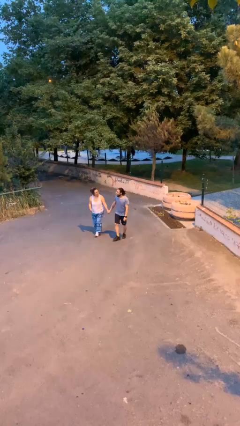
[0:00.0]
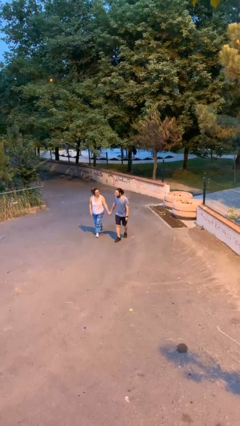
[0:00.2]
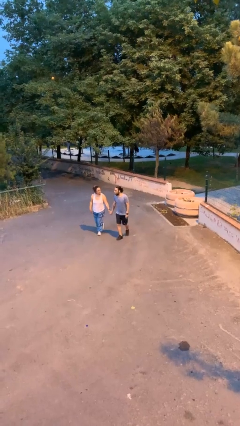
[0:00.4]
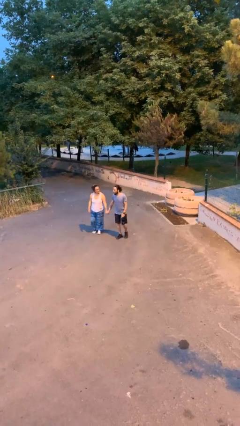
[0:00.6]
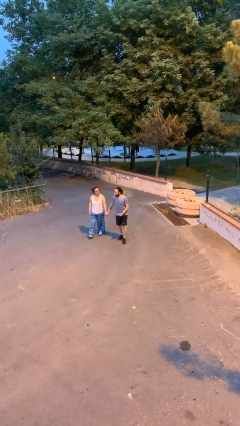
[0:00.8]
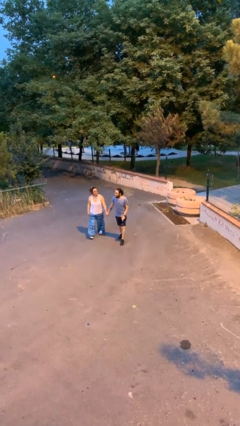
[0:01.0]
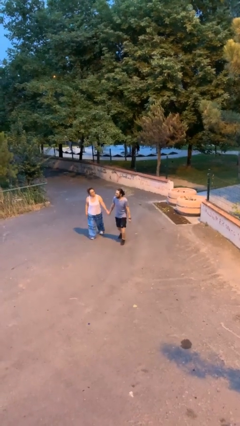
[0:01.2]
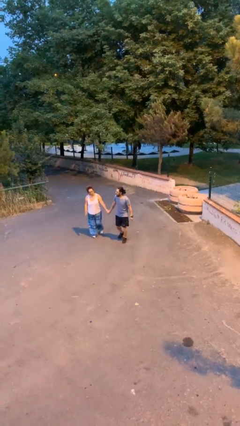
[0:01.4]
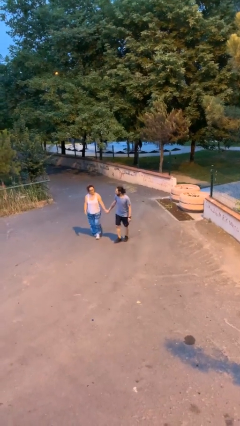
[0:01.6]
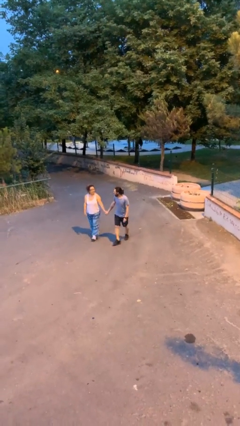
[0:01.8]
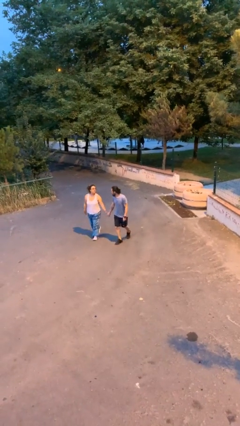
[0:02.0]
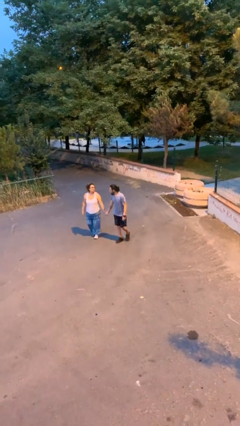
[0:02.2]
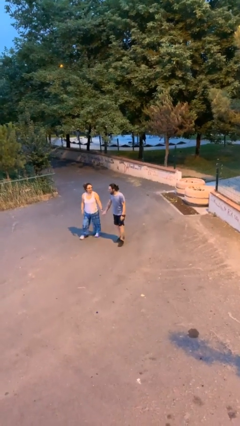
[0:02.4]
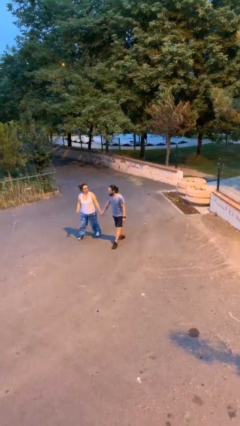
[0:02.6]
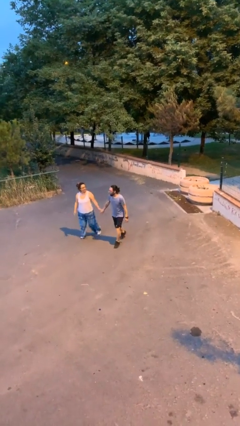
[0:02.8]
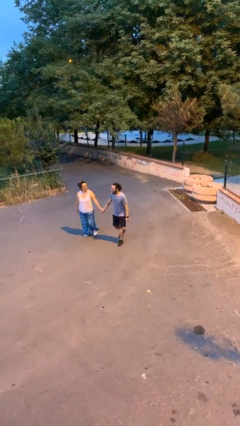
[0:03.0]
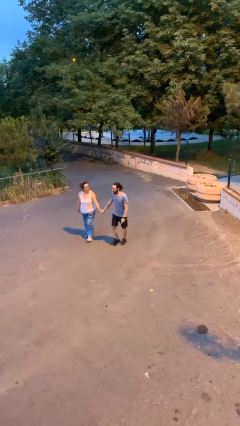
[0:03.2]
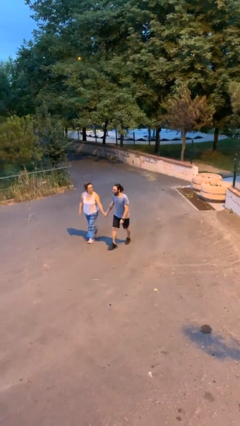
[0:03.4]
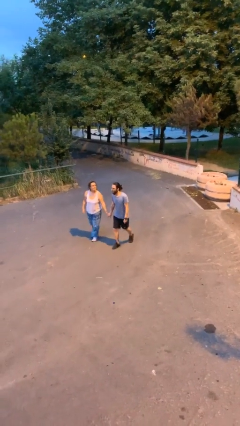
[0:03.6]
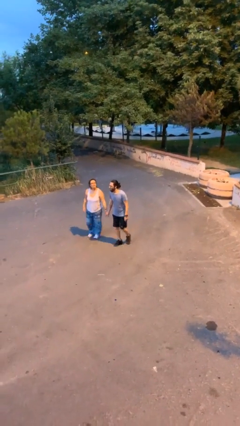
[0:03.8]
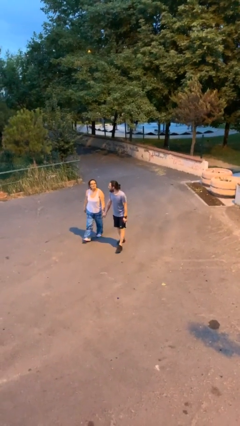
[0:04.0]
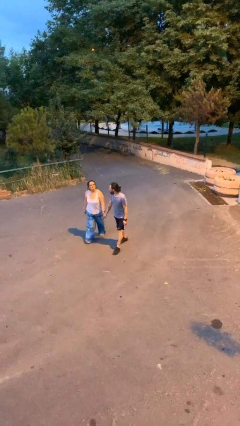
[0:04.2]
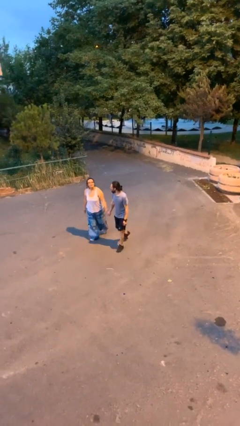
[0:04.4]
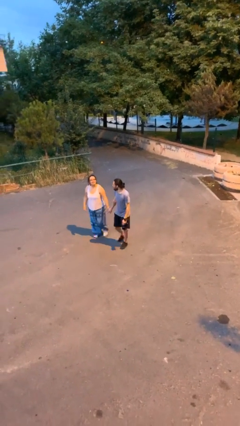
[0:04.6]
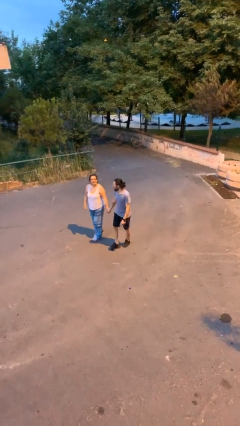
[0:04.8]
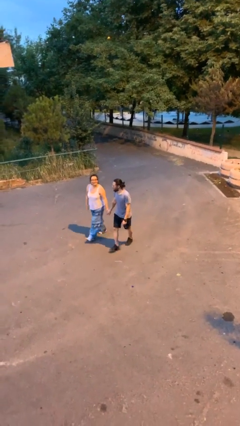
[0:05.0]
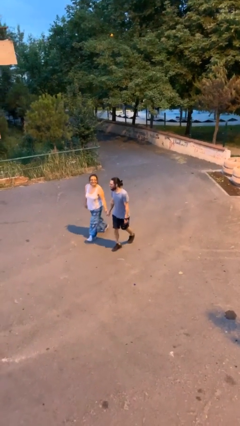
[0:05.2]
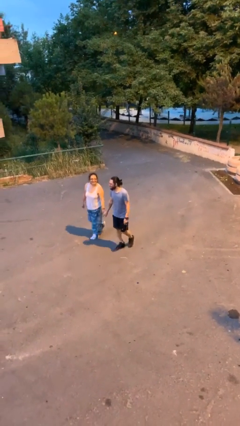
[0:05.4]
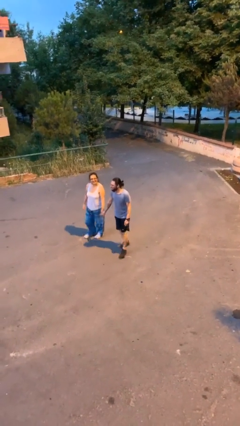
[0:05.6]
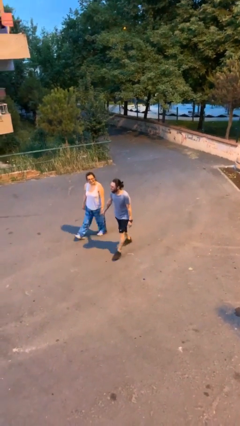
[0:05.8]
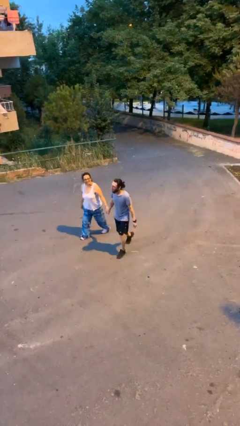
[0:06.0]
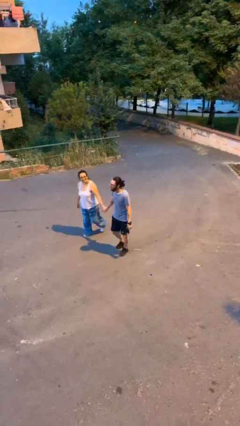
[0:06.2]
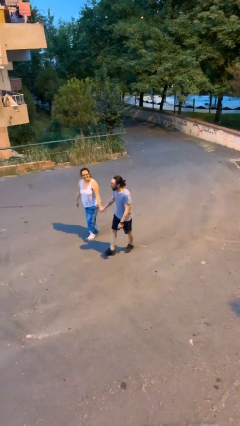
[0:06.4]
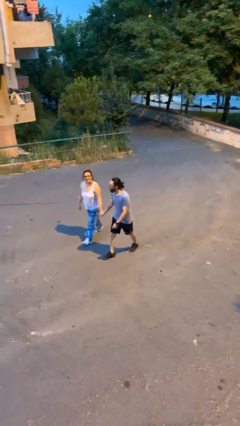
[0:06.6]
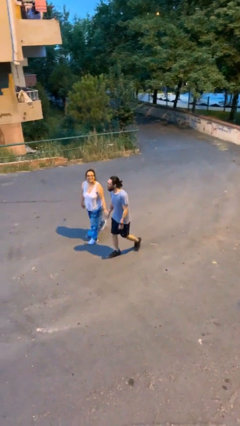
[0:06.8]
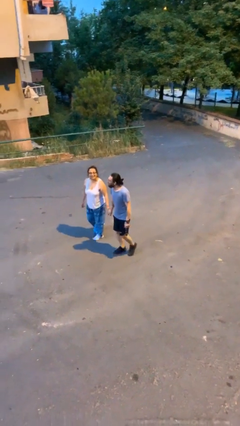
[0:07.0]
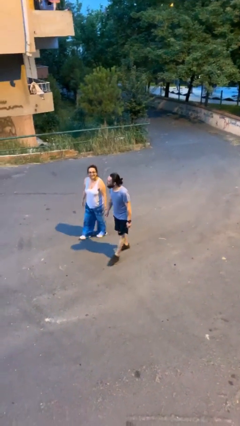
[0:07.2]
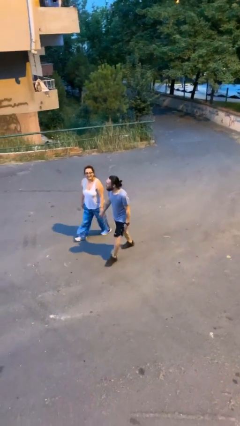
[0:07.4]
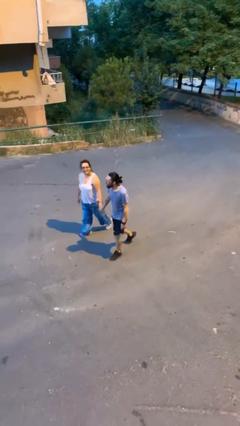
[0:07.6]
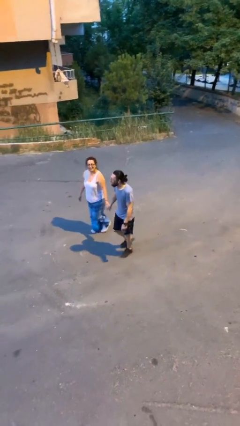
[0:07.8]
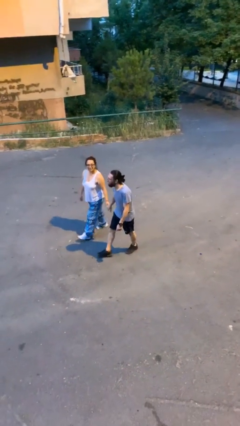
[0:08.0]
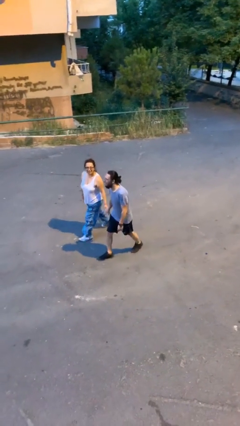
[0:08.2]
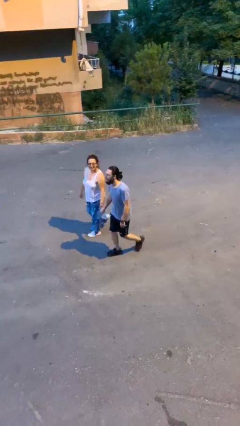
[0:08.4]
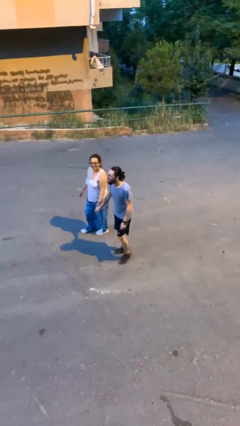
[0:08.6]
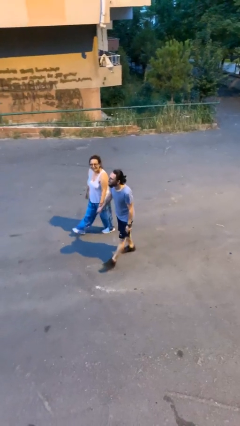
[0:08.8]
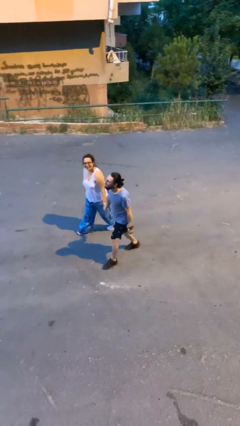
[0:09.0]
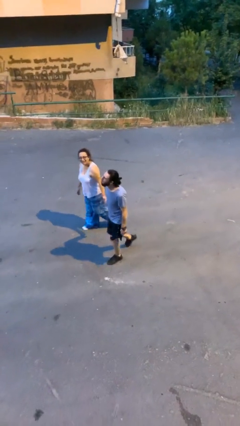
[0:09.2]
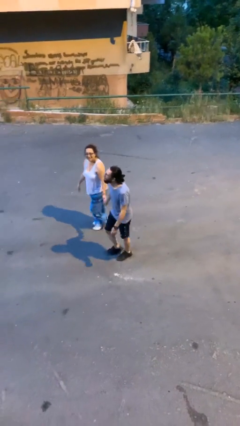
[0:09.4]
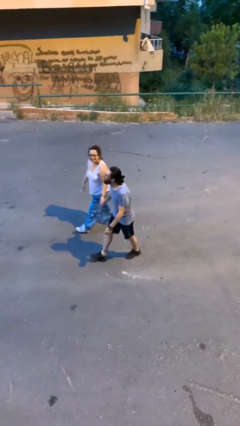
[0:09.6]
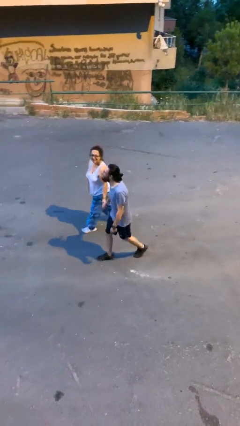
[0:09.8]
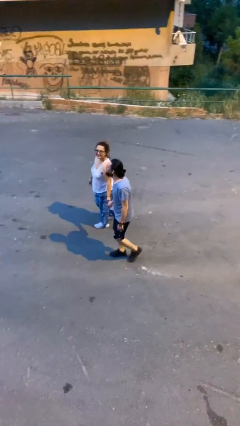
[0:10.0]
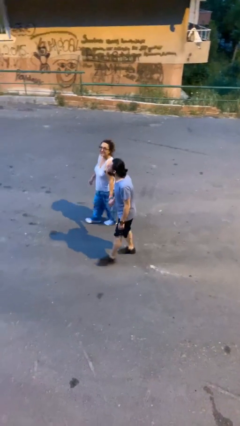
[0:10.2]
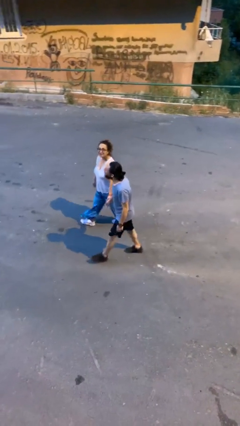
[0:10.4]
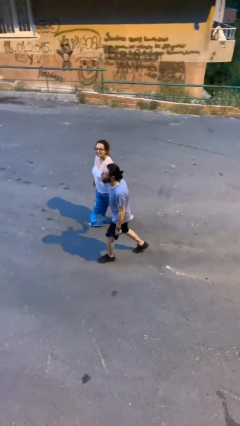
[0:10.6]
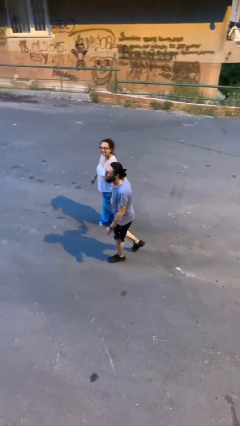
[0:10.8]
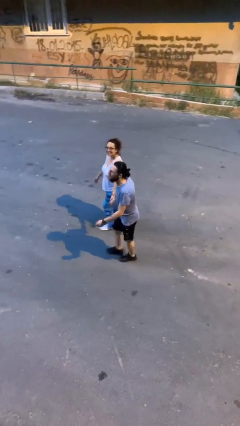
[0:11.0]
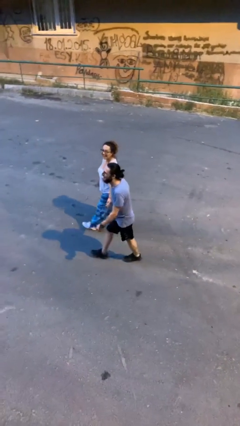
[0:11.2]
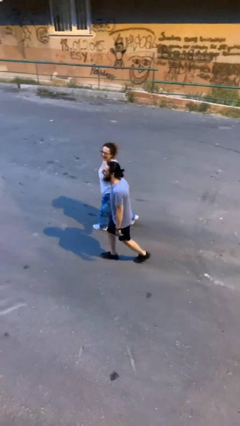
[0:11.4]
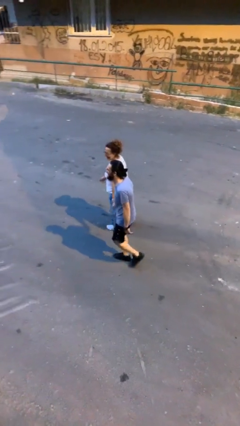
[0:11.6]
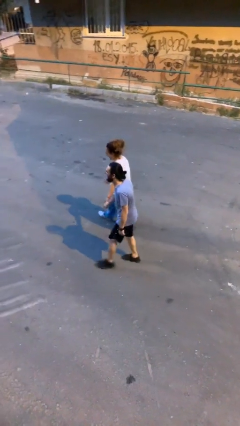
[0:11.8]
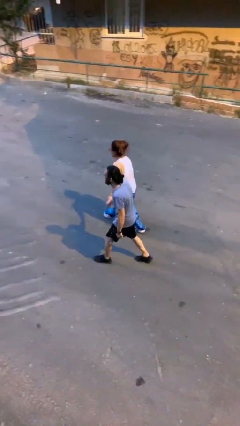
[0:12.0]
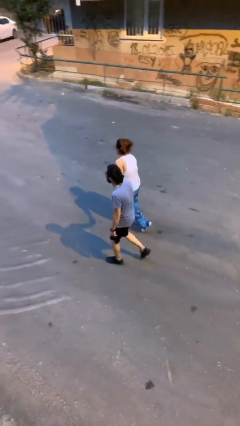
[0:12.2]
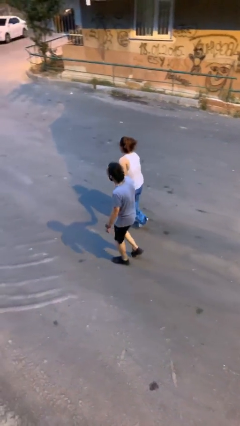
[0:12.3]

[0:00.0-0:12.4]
person holds hand

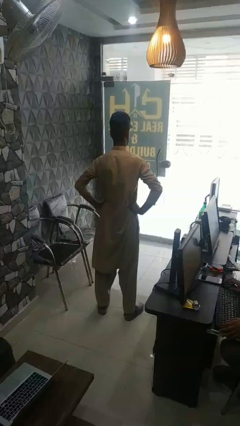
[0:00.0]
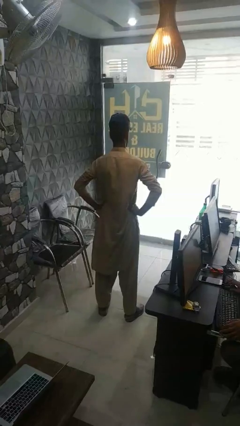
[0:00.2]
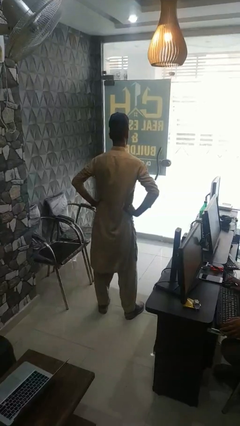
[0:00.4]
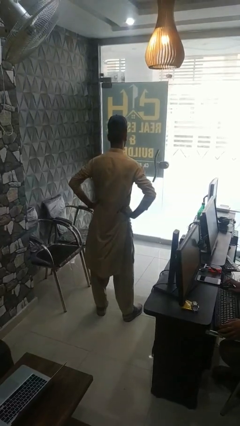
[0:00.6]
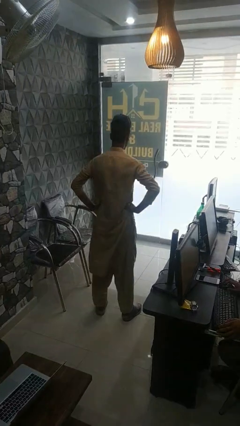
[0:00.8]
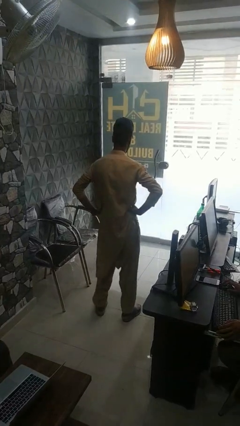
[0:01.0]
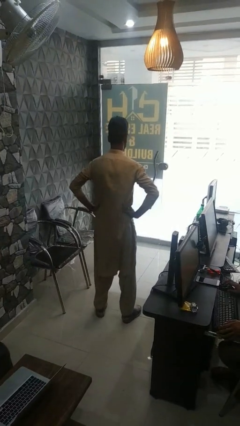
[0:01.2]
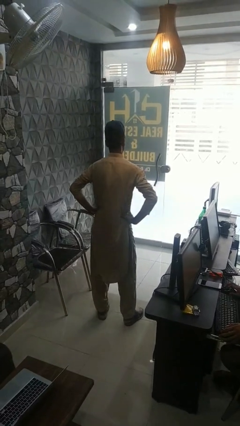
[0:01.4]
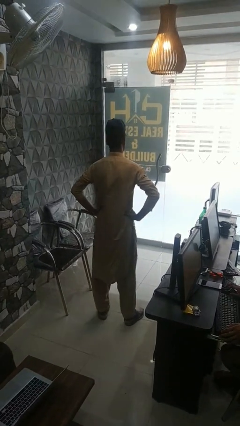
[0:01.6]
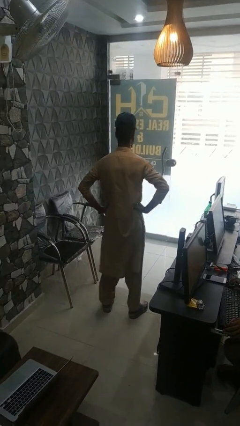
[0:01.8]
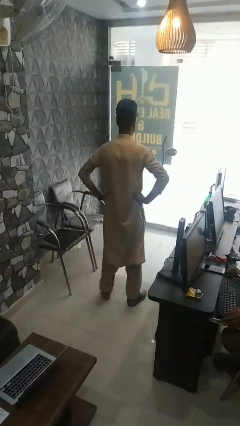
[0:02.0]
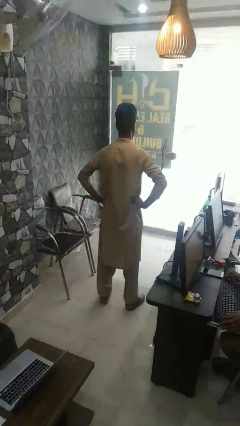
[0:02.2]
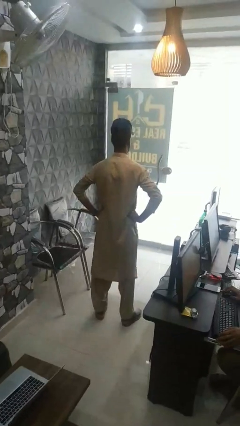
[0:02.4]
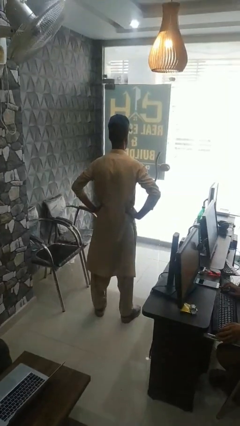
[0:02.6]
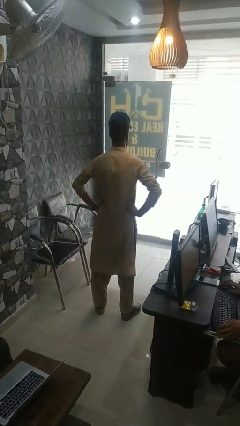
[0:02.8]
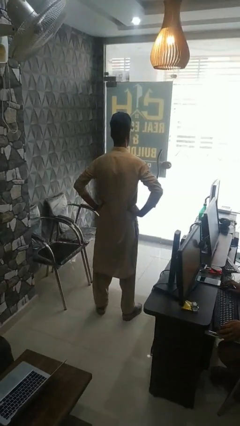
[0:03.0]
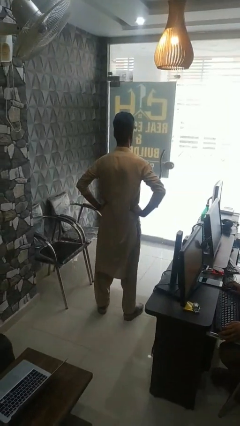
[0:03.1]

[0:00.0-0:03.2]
person wiggles hips

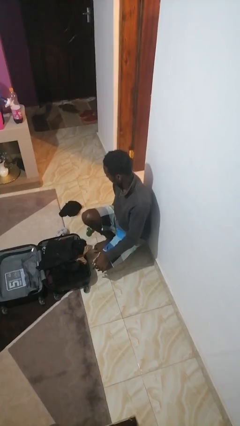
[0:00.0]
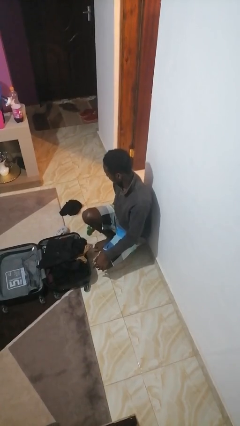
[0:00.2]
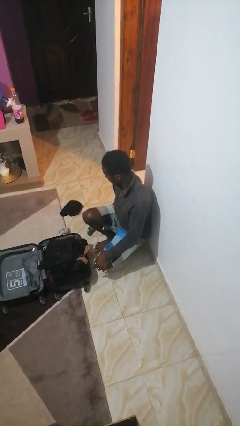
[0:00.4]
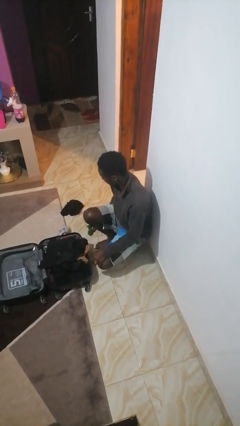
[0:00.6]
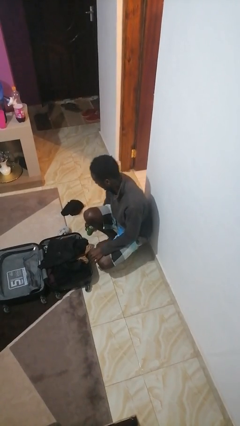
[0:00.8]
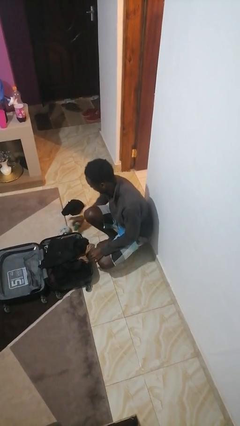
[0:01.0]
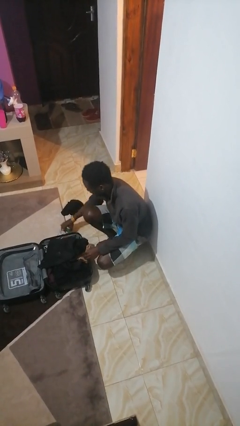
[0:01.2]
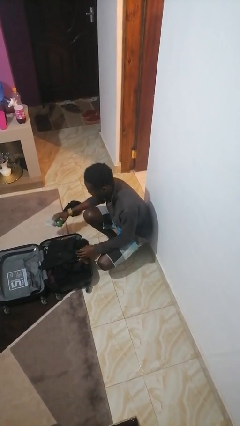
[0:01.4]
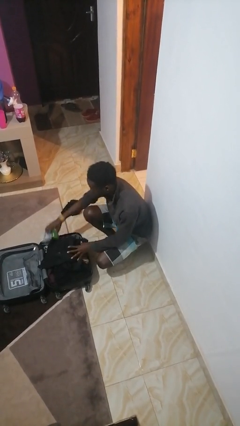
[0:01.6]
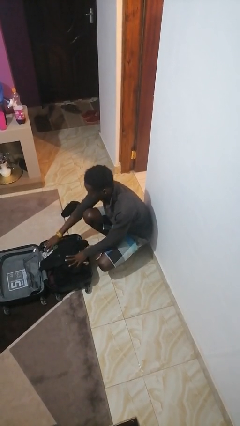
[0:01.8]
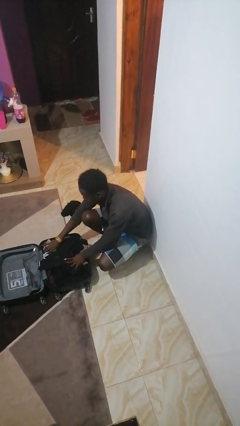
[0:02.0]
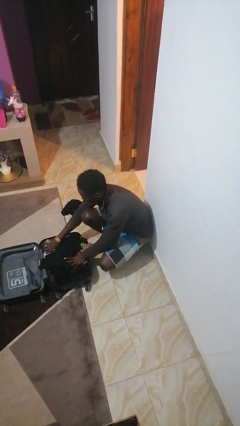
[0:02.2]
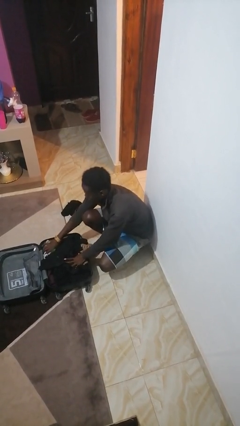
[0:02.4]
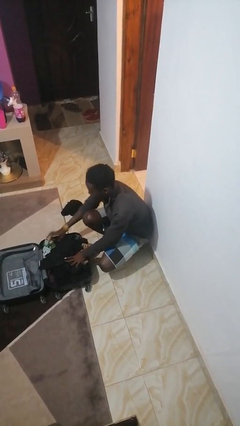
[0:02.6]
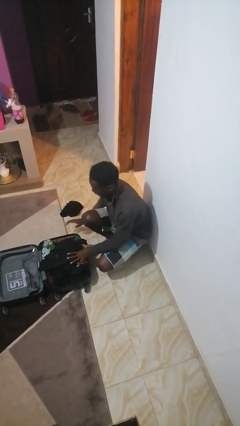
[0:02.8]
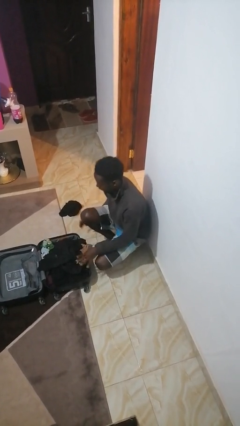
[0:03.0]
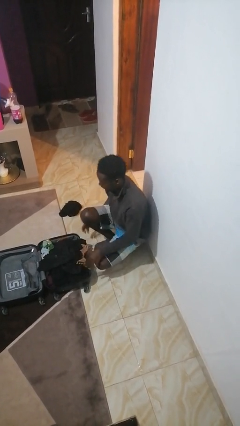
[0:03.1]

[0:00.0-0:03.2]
person loads clothes into suitcase
